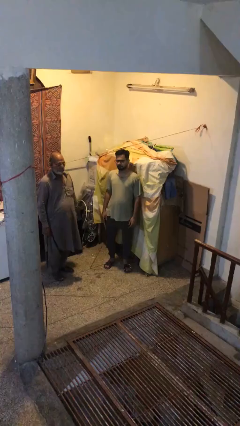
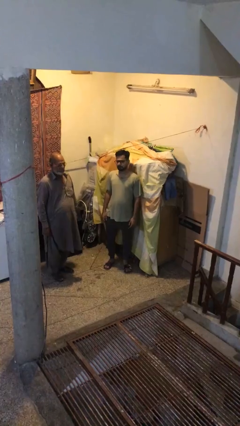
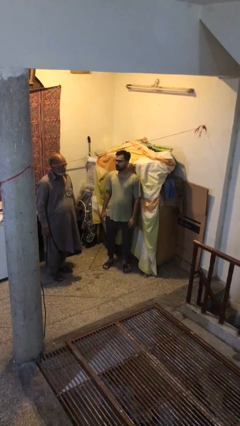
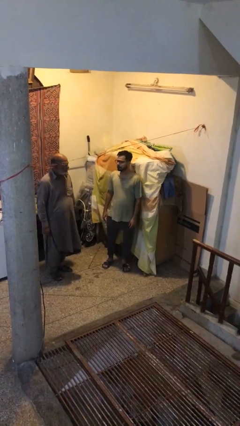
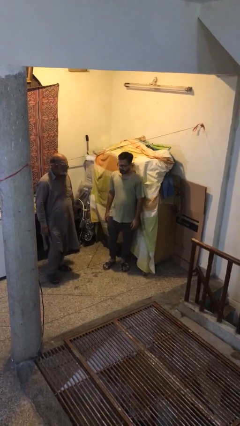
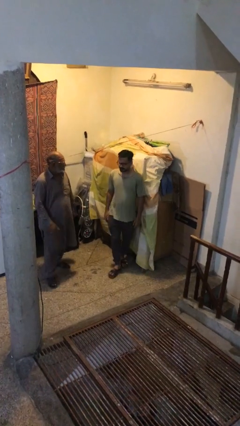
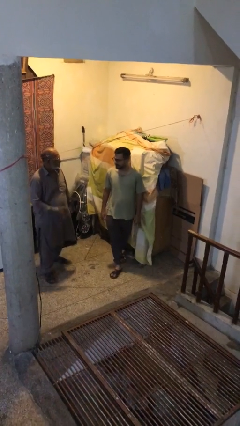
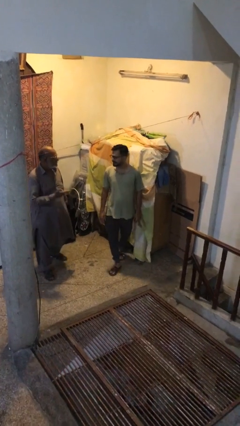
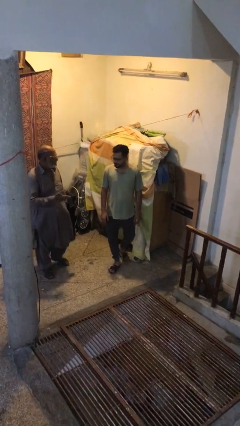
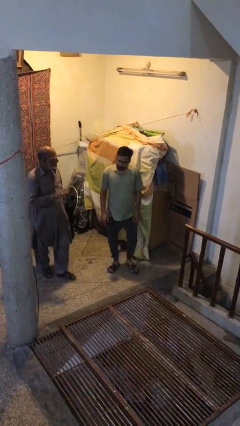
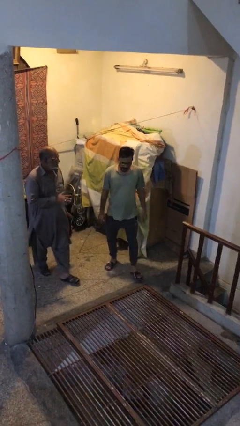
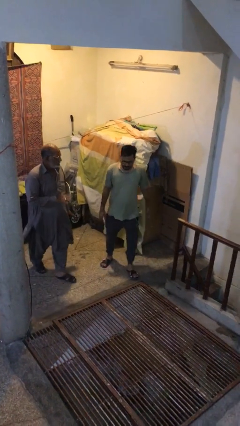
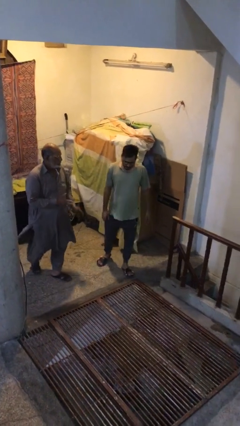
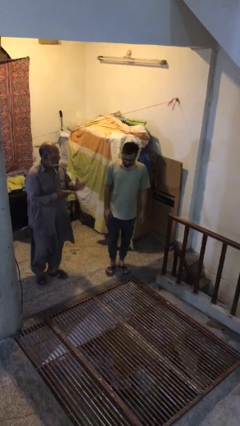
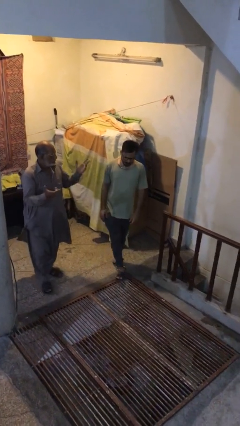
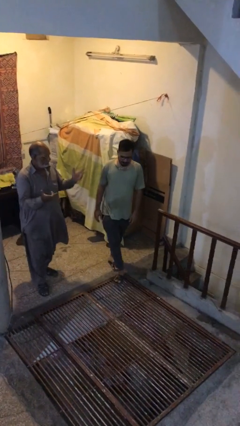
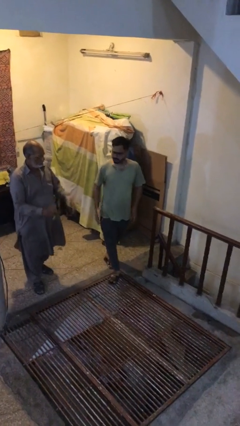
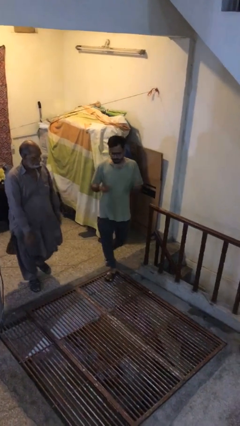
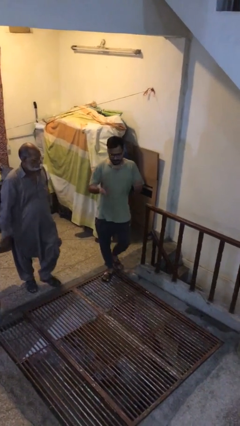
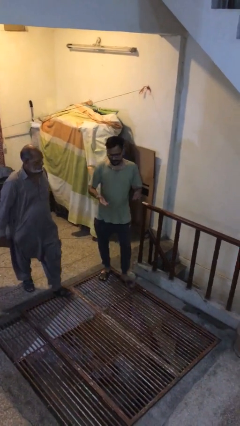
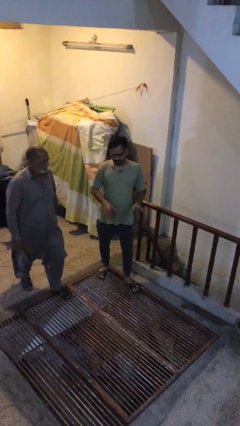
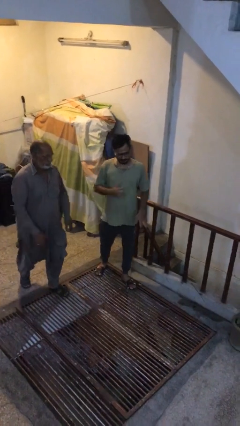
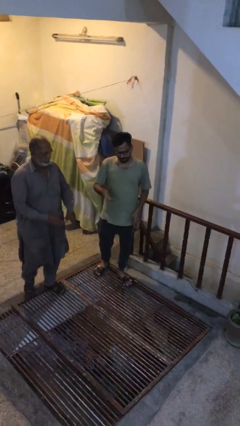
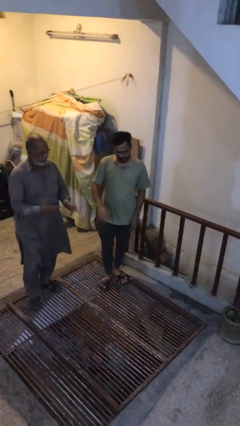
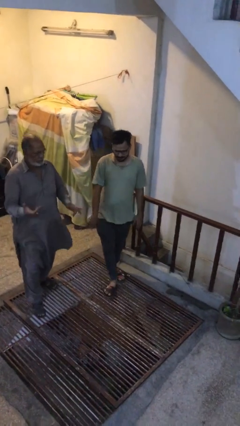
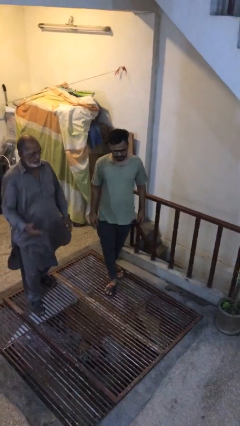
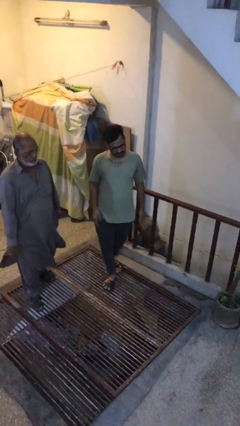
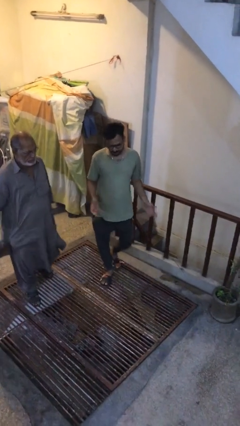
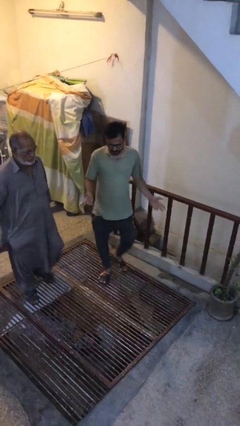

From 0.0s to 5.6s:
person talks to person

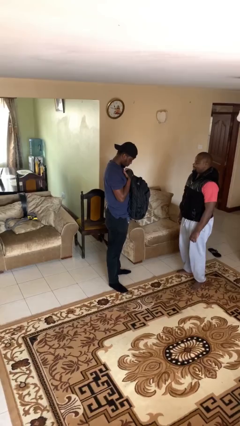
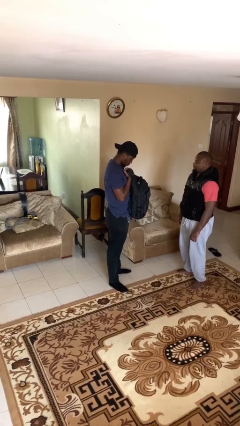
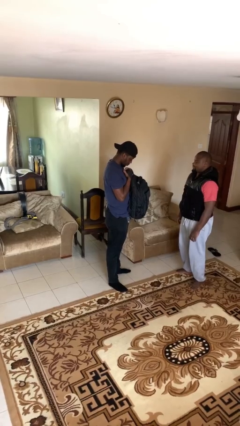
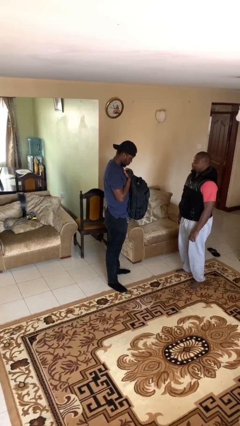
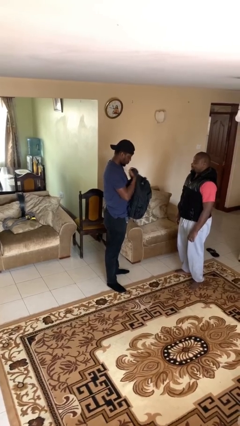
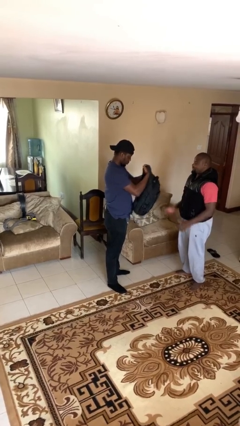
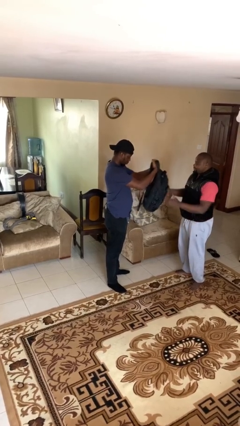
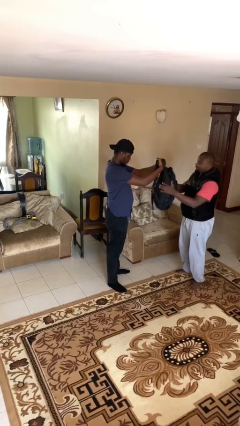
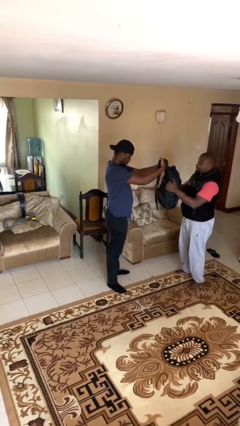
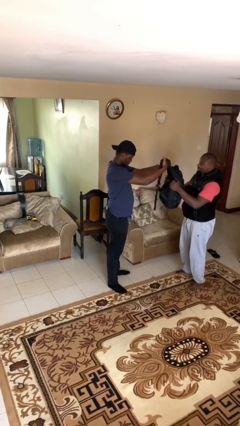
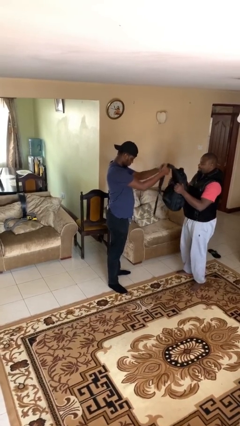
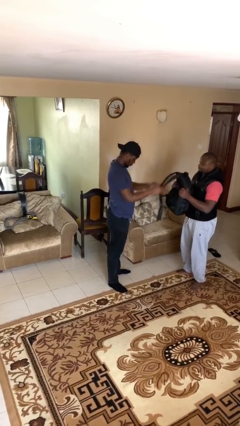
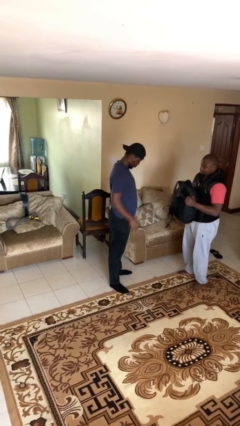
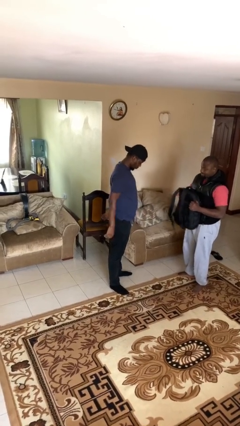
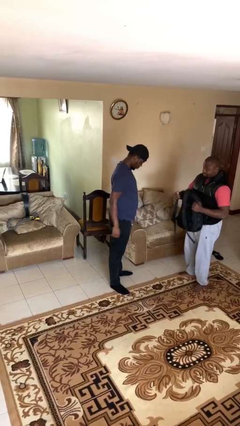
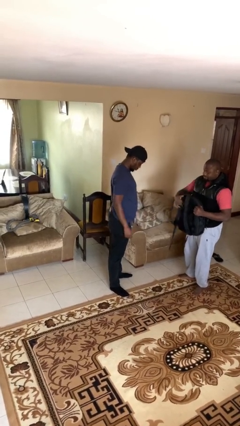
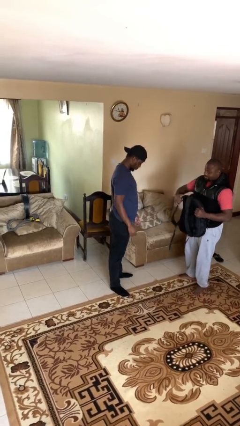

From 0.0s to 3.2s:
person transfers object to person

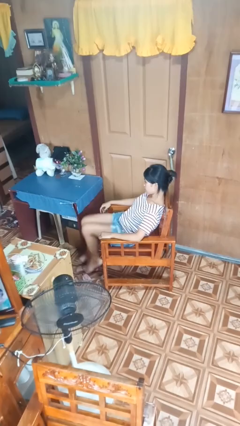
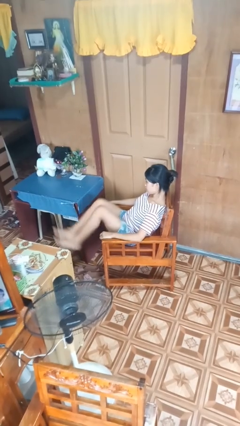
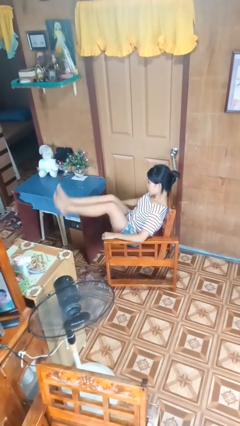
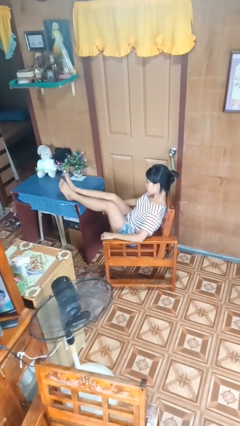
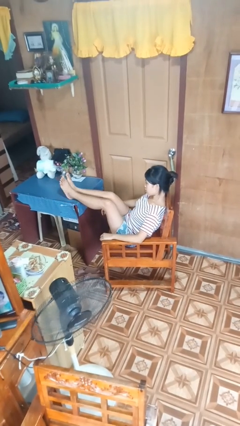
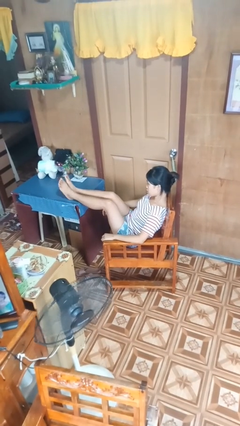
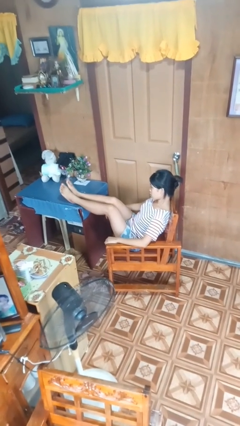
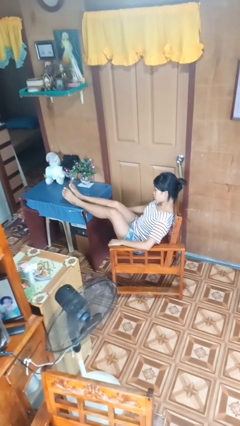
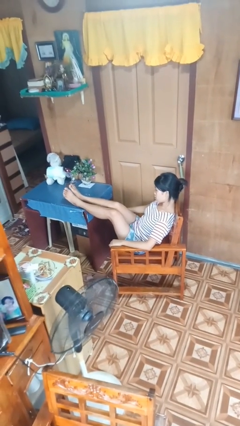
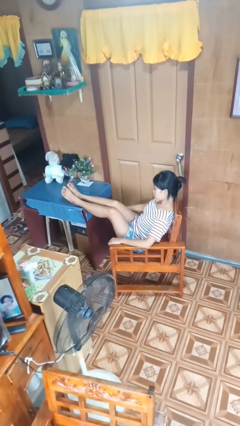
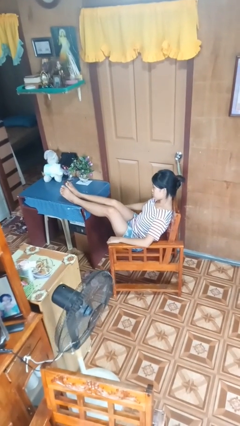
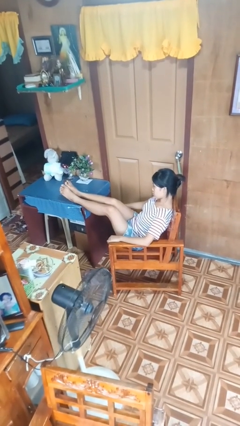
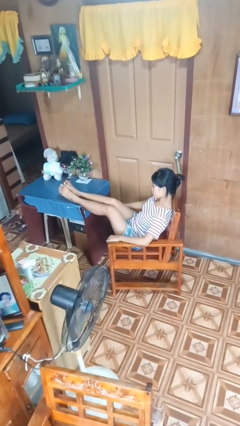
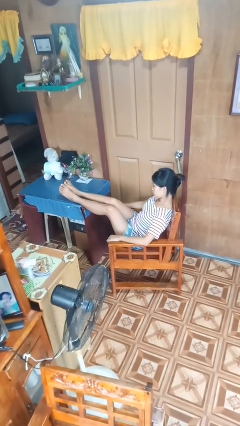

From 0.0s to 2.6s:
person puts feet up

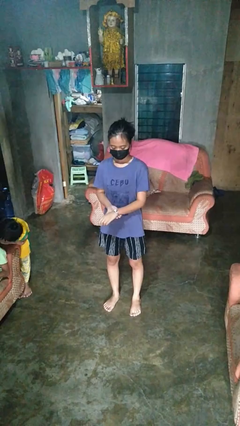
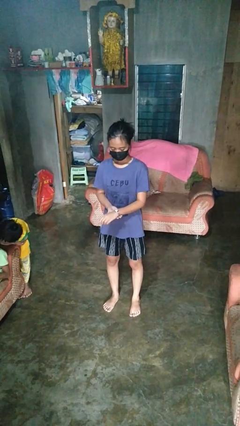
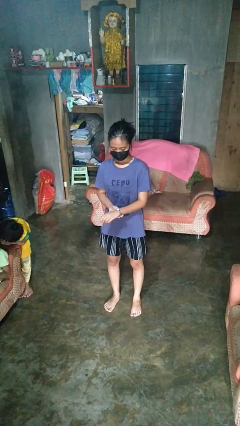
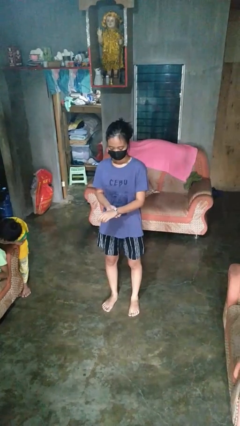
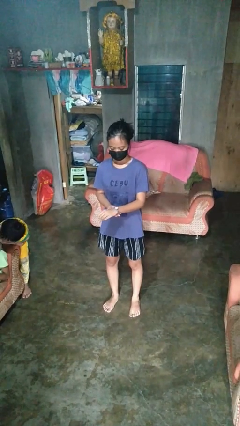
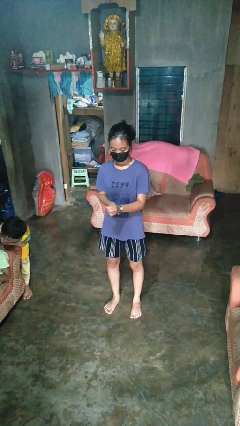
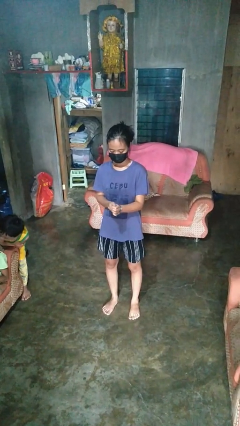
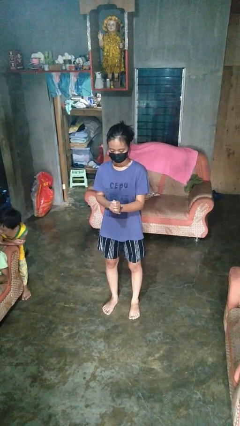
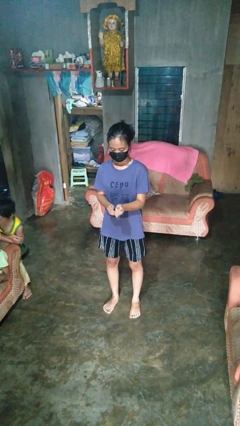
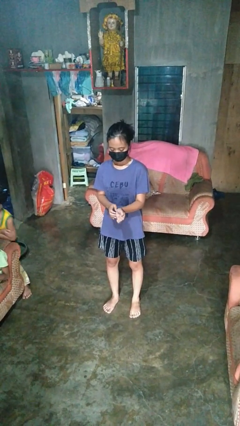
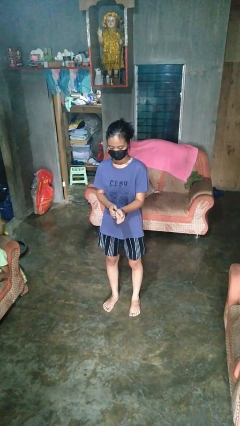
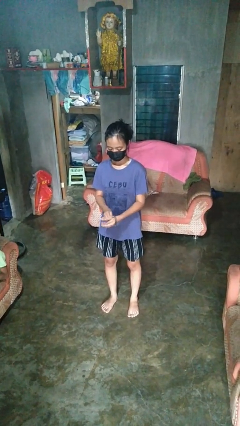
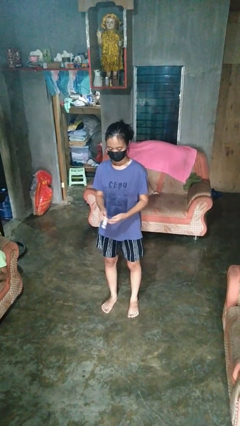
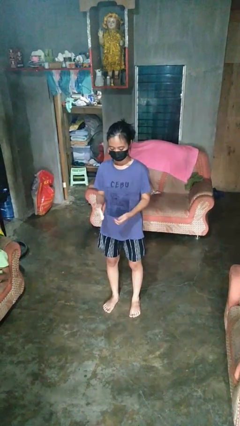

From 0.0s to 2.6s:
person takes off wristwatch

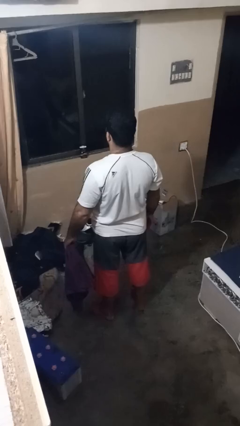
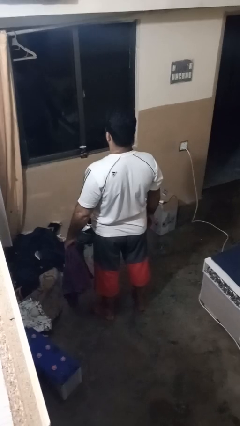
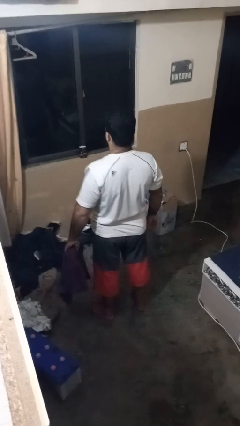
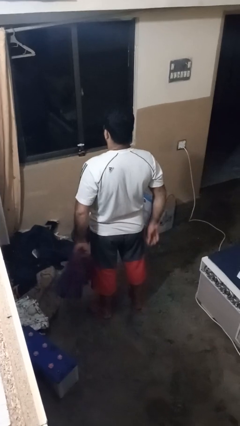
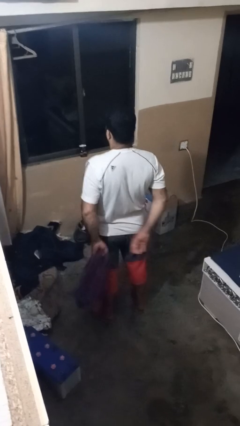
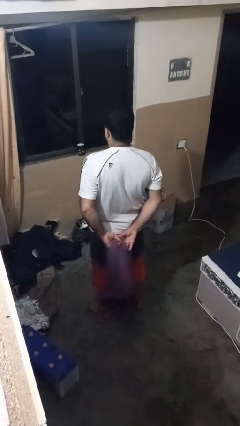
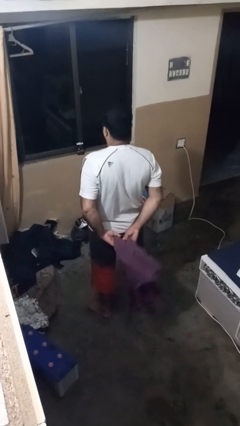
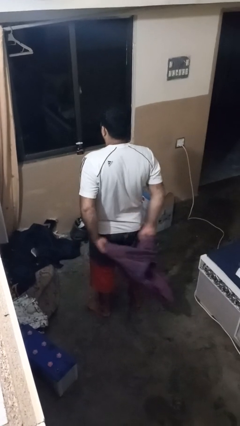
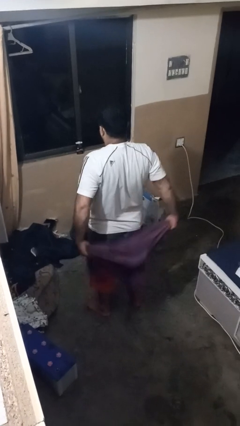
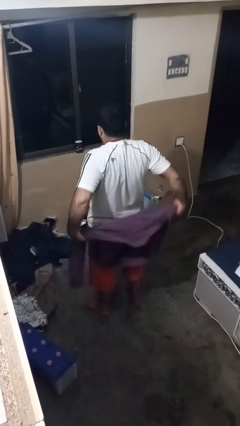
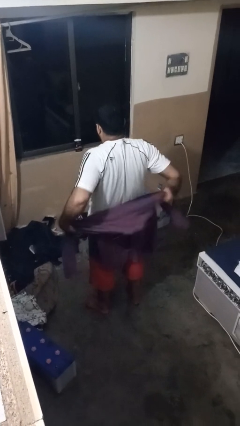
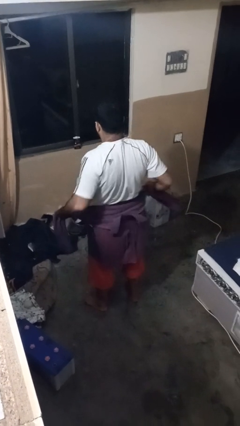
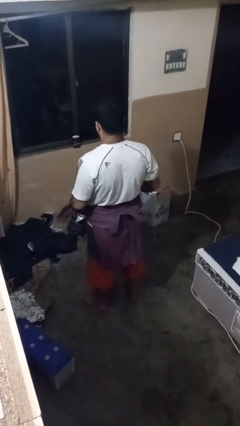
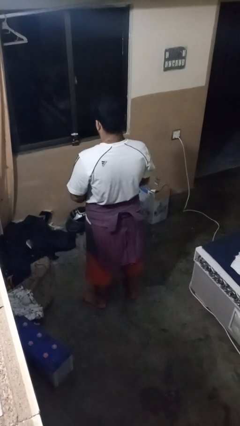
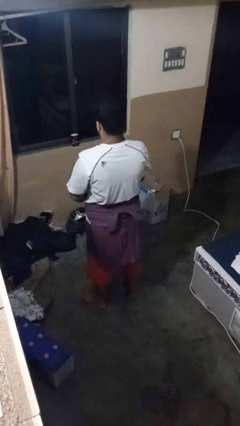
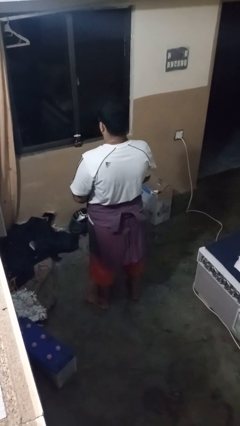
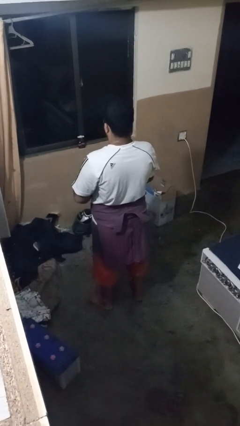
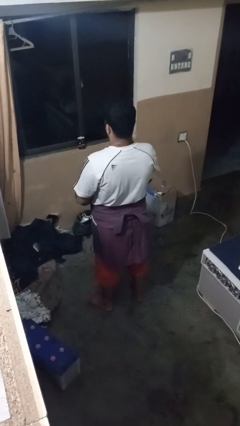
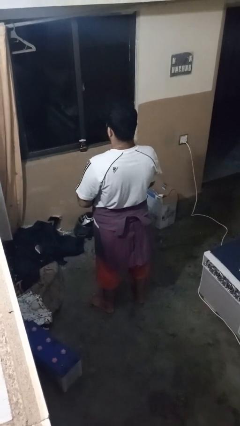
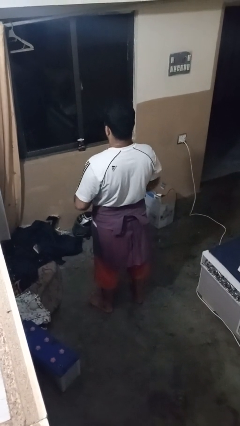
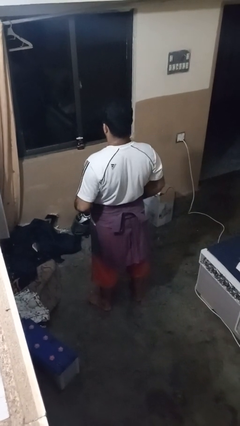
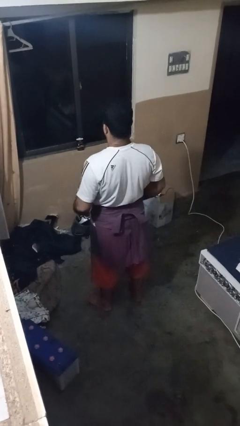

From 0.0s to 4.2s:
person ties jacket around waist
